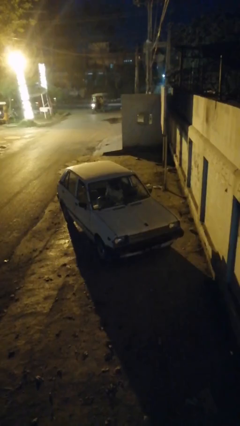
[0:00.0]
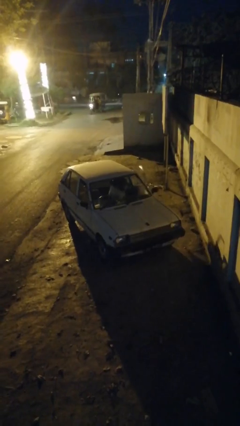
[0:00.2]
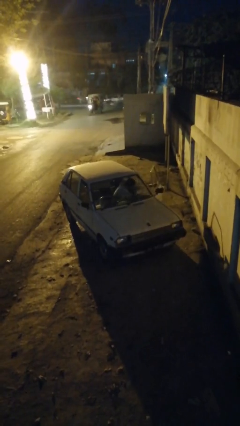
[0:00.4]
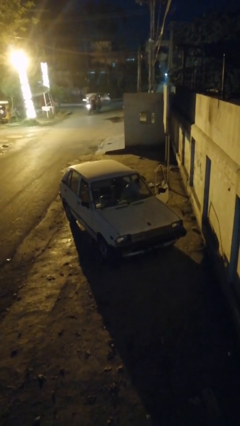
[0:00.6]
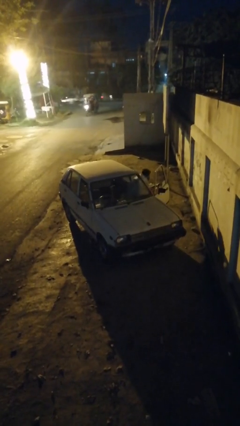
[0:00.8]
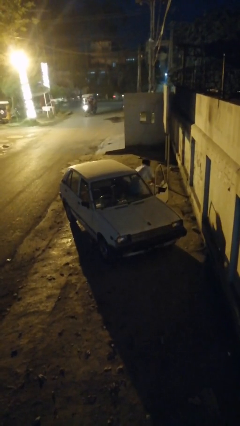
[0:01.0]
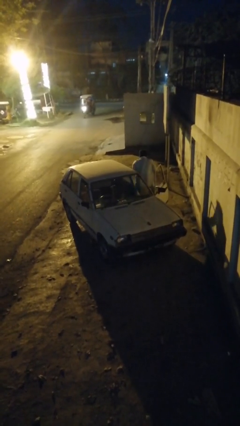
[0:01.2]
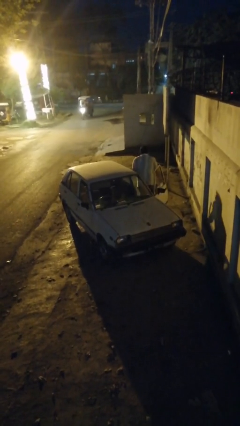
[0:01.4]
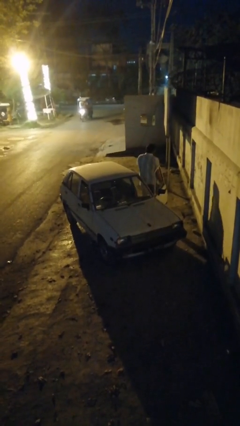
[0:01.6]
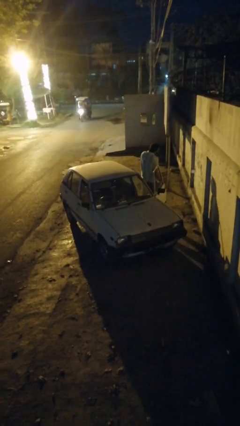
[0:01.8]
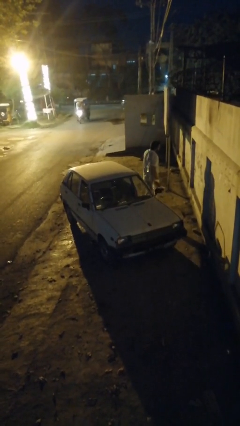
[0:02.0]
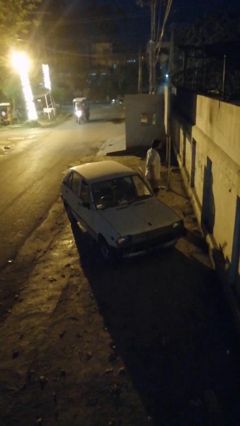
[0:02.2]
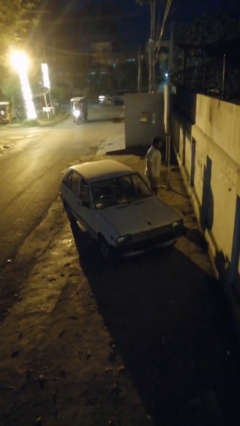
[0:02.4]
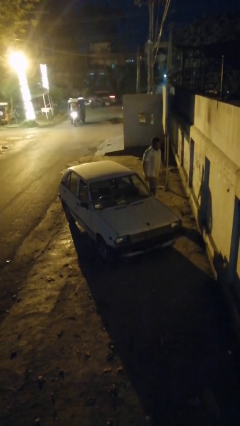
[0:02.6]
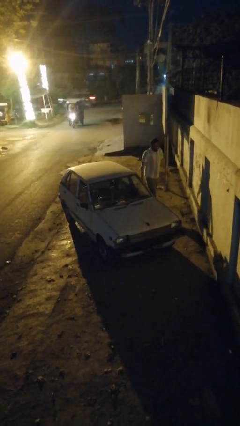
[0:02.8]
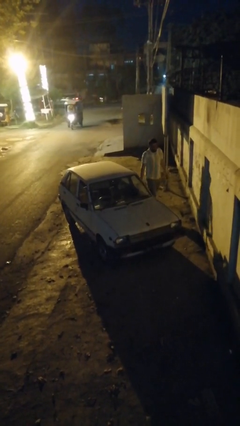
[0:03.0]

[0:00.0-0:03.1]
car drops off person

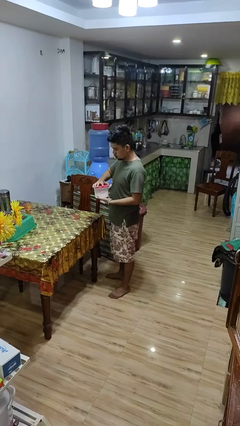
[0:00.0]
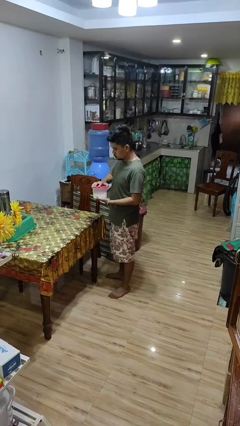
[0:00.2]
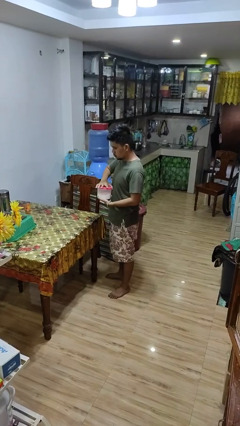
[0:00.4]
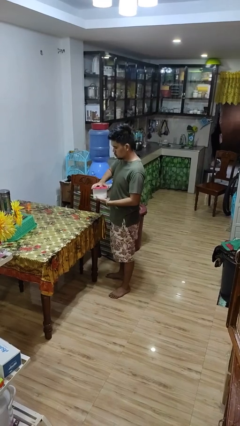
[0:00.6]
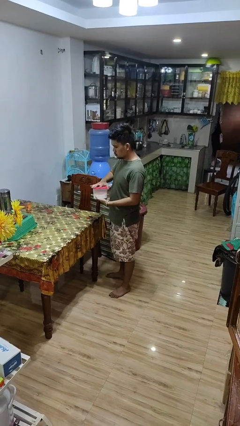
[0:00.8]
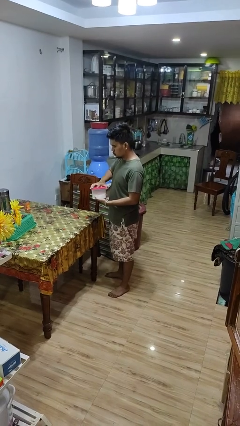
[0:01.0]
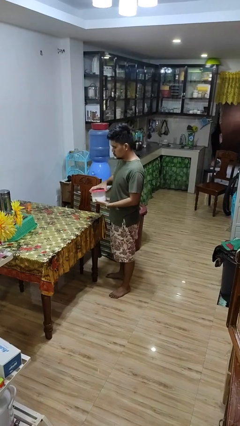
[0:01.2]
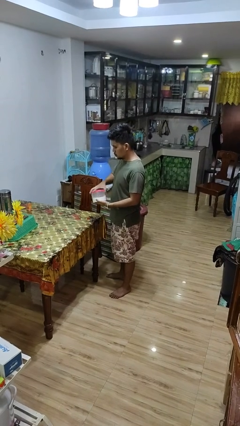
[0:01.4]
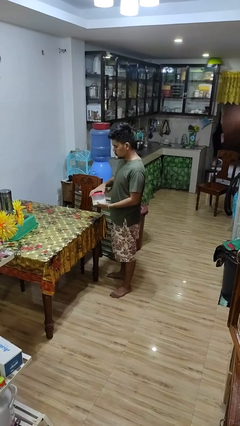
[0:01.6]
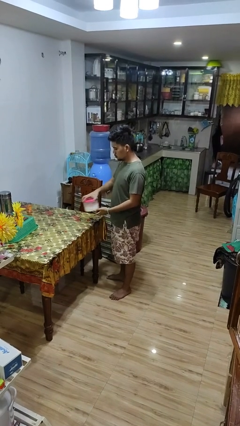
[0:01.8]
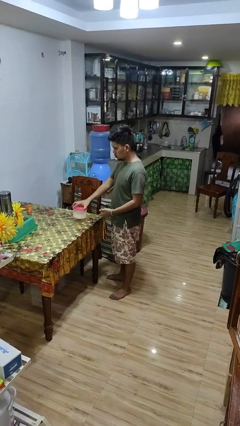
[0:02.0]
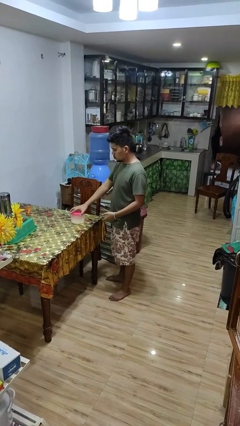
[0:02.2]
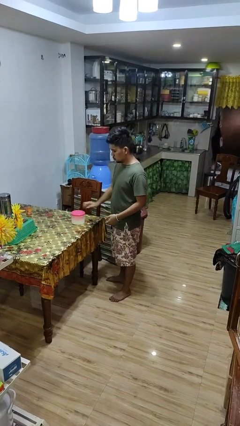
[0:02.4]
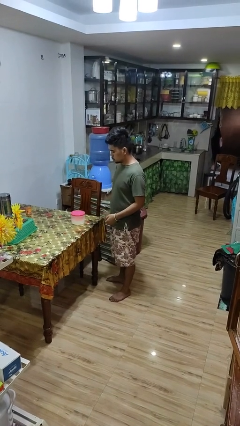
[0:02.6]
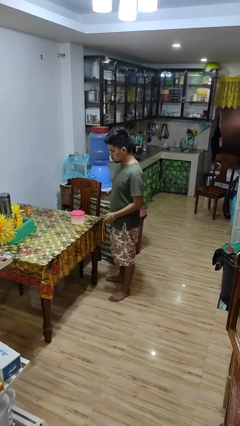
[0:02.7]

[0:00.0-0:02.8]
person closes jar

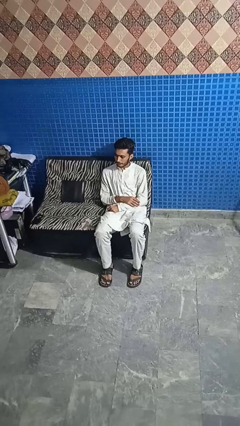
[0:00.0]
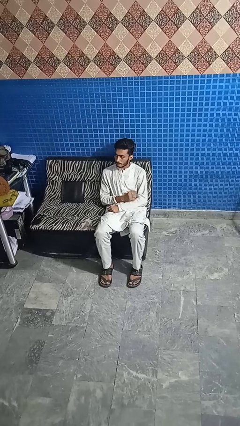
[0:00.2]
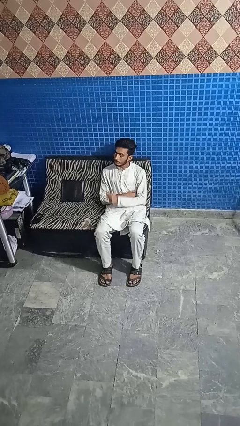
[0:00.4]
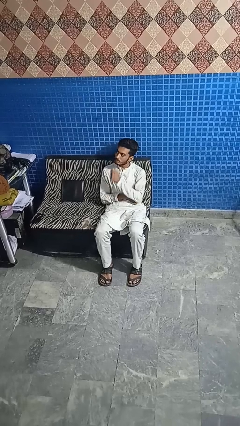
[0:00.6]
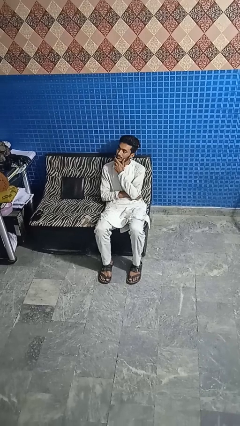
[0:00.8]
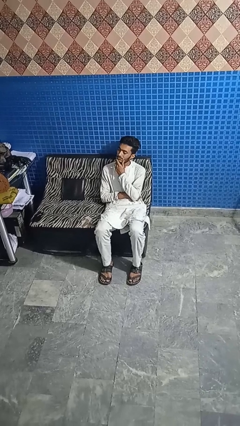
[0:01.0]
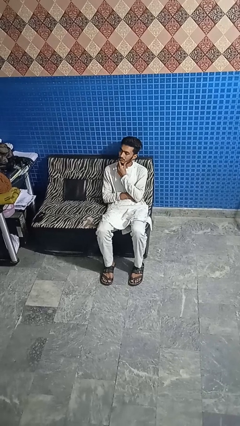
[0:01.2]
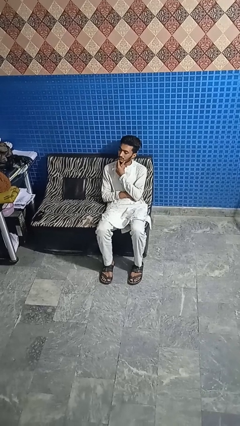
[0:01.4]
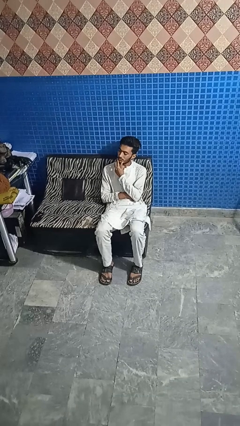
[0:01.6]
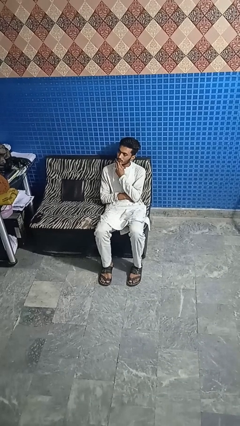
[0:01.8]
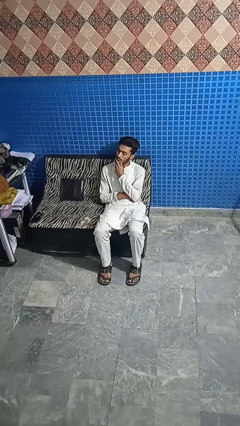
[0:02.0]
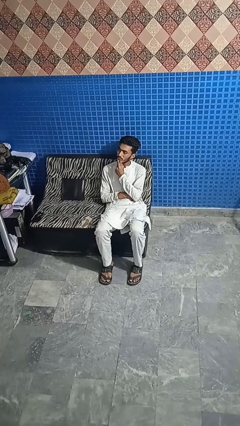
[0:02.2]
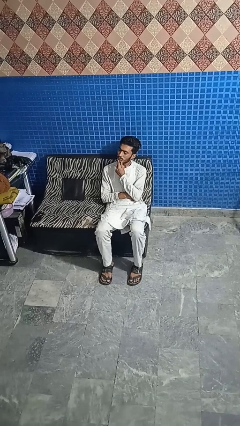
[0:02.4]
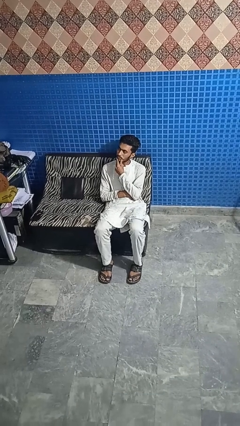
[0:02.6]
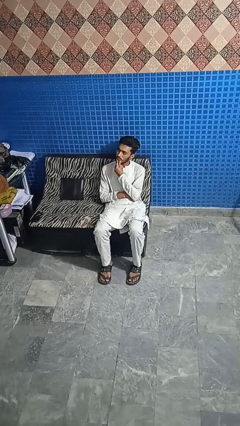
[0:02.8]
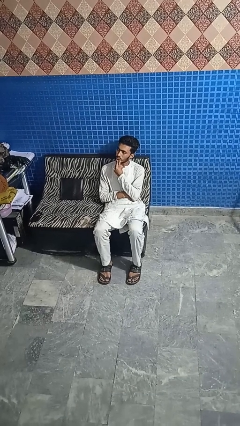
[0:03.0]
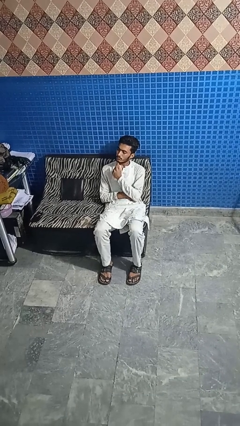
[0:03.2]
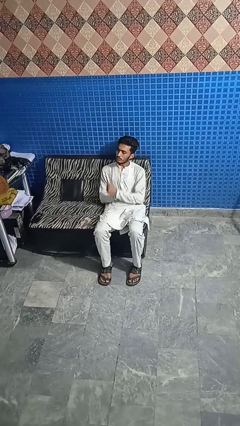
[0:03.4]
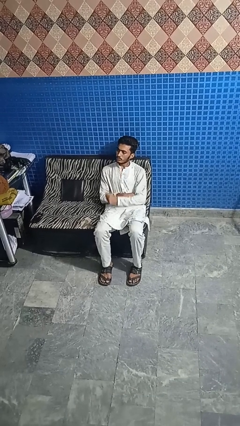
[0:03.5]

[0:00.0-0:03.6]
person strokes chin

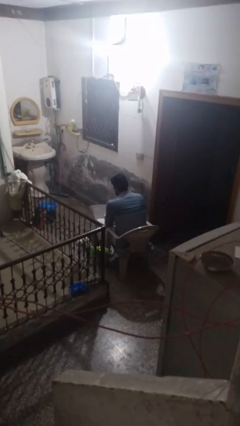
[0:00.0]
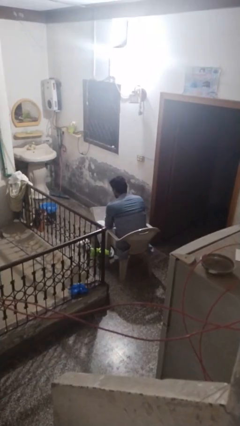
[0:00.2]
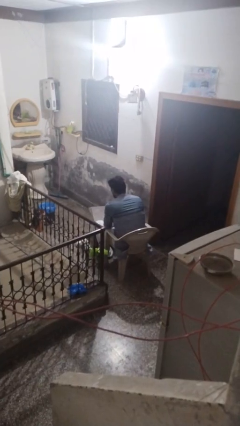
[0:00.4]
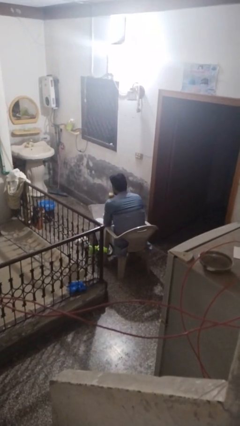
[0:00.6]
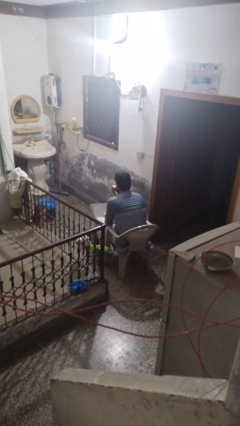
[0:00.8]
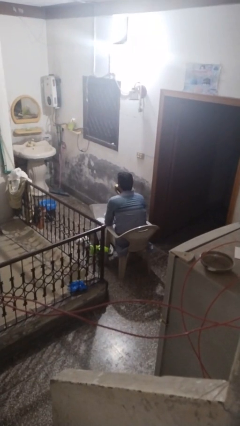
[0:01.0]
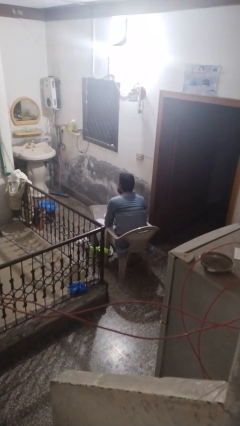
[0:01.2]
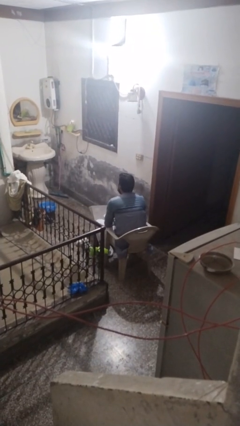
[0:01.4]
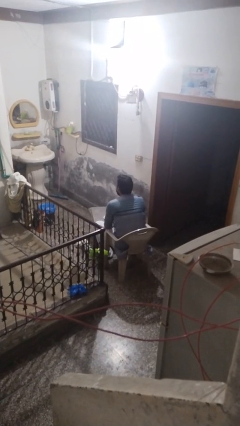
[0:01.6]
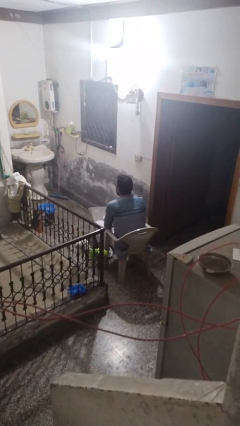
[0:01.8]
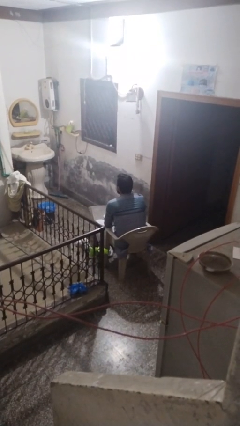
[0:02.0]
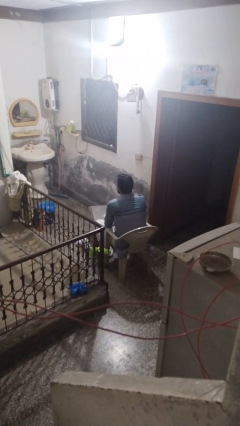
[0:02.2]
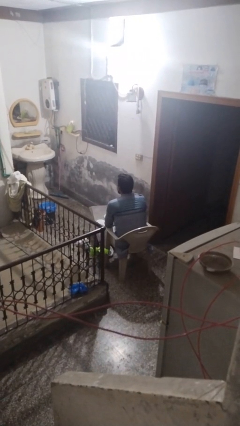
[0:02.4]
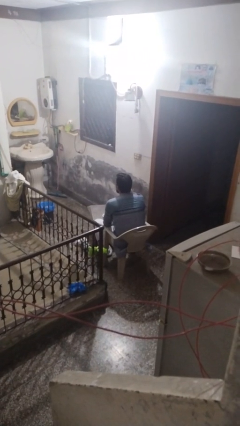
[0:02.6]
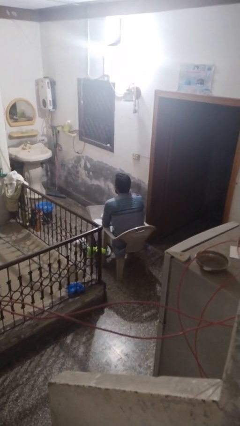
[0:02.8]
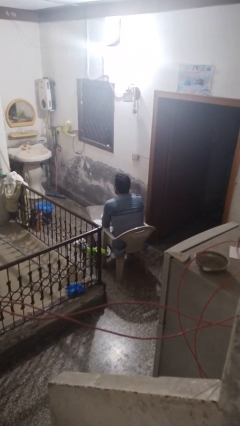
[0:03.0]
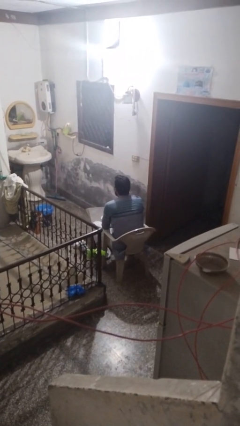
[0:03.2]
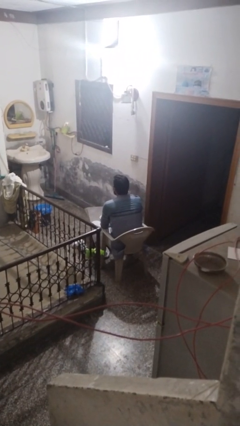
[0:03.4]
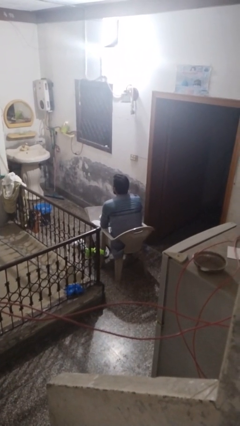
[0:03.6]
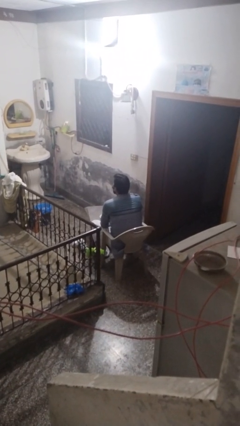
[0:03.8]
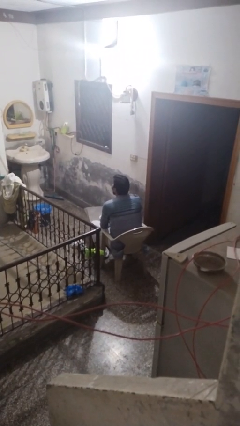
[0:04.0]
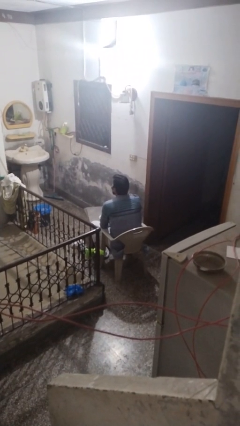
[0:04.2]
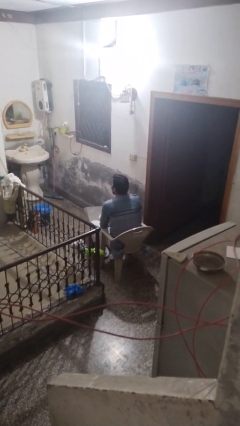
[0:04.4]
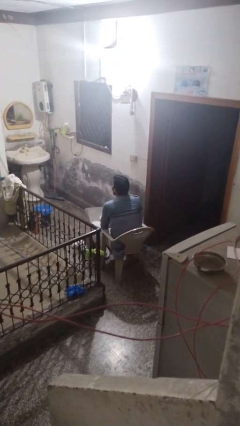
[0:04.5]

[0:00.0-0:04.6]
person eats with hands

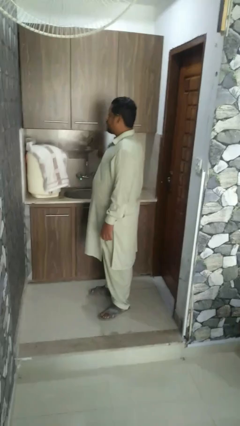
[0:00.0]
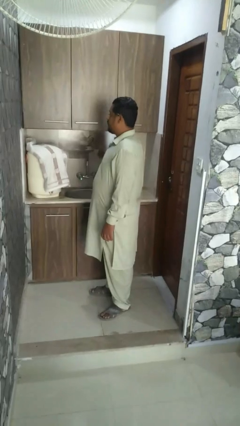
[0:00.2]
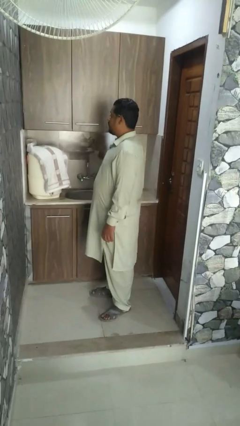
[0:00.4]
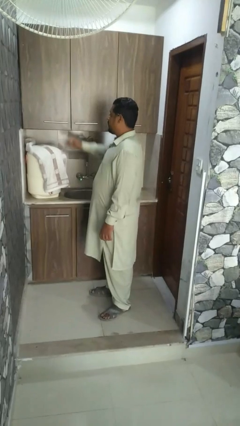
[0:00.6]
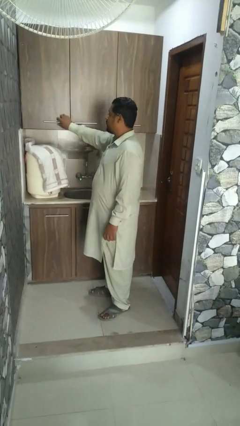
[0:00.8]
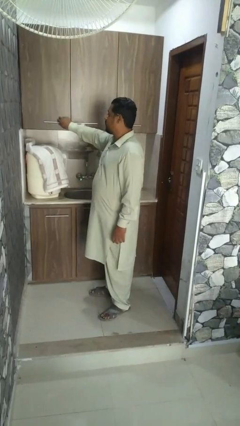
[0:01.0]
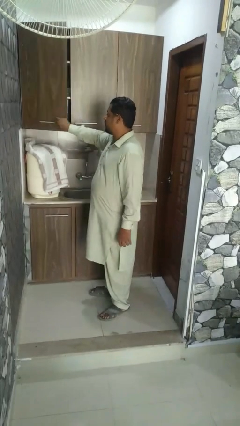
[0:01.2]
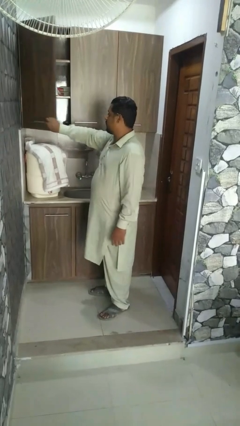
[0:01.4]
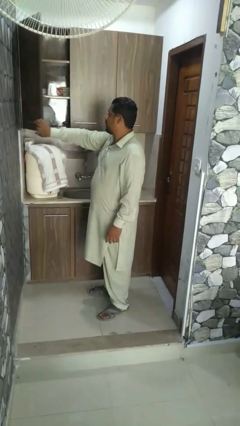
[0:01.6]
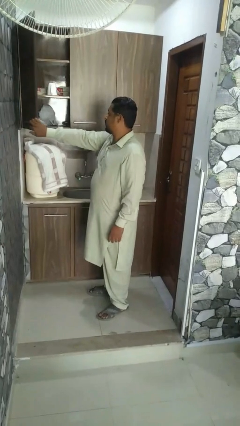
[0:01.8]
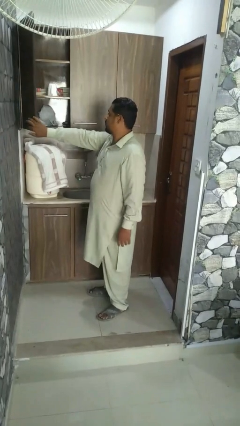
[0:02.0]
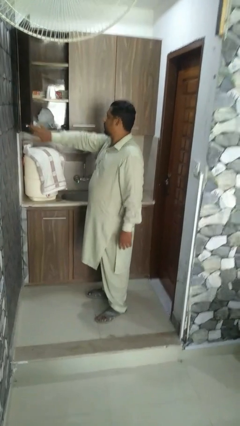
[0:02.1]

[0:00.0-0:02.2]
person opens microwave

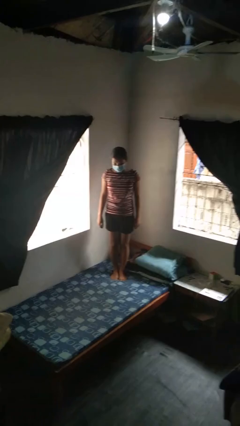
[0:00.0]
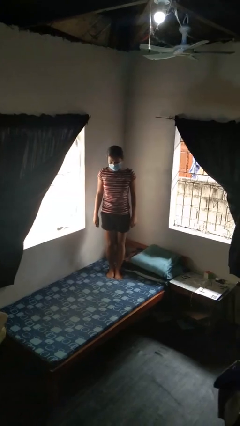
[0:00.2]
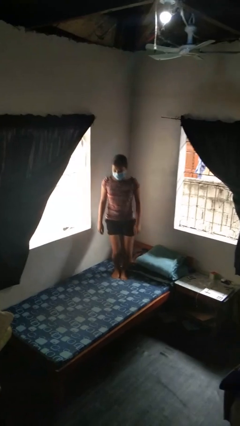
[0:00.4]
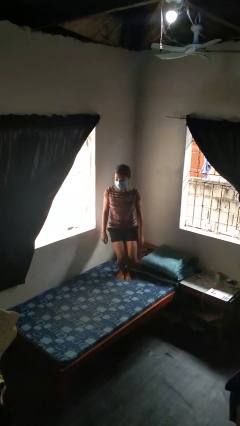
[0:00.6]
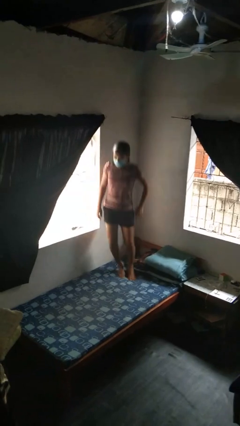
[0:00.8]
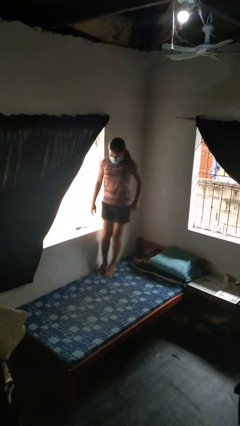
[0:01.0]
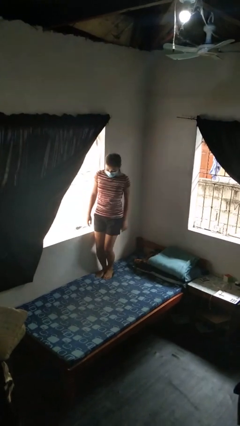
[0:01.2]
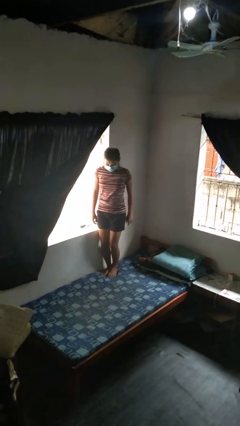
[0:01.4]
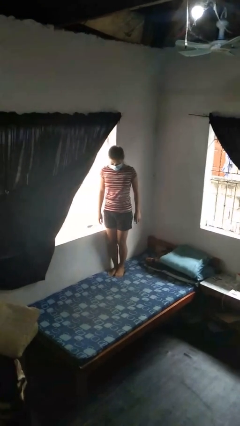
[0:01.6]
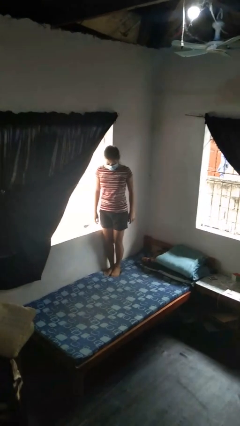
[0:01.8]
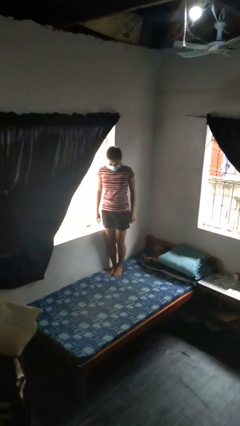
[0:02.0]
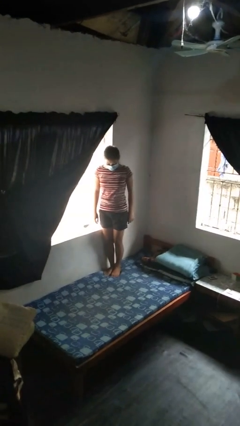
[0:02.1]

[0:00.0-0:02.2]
person jumps on bed
